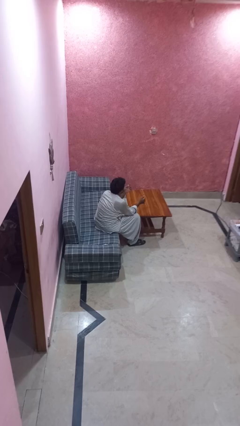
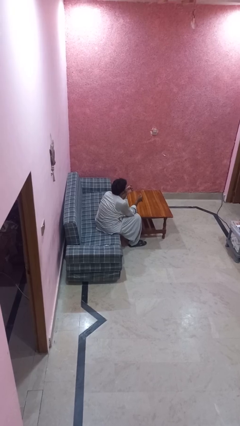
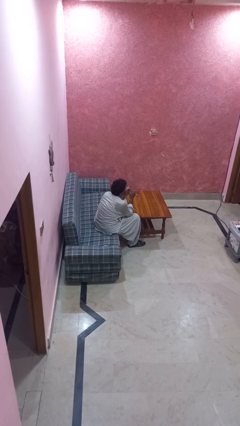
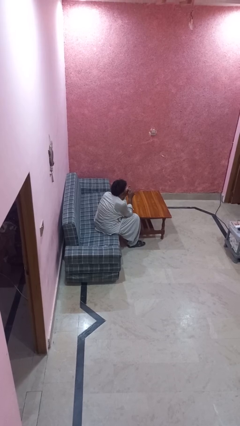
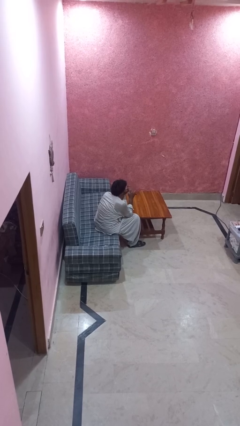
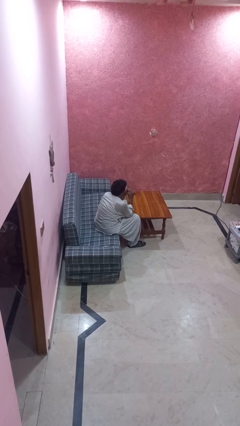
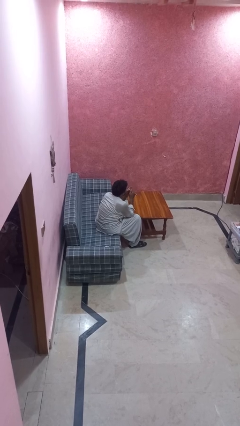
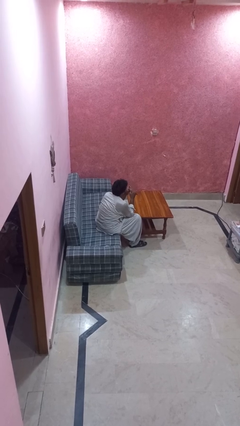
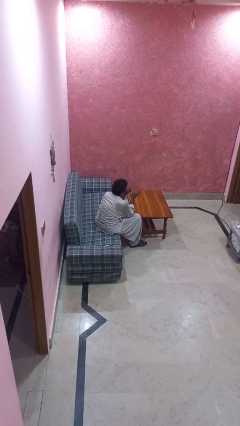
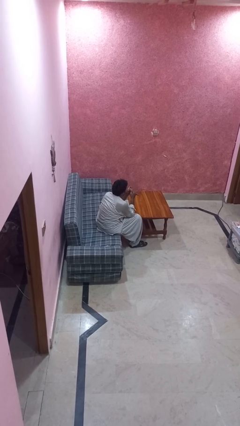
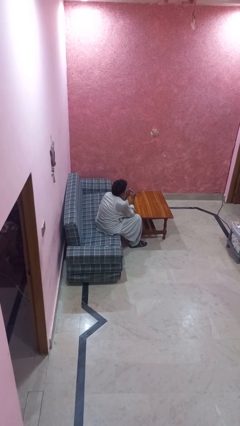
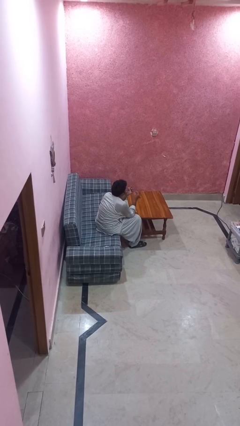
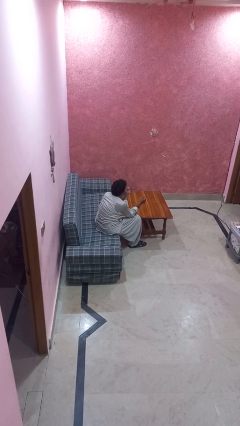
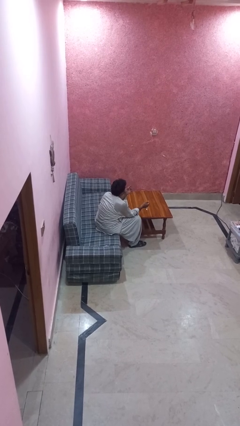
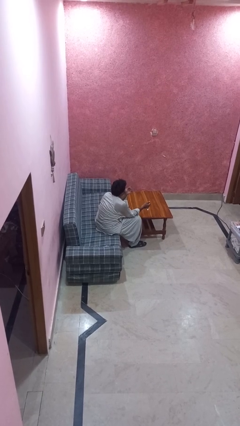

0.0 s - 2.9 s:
person files fingernails

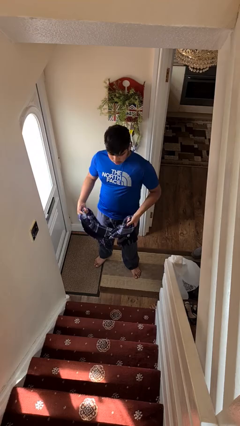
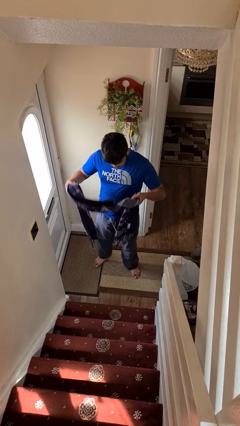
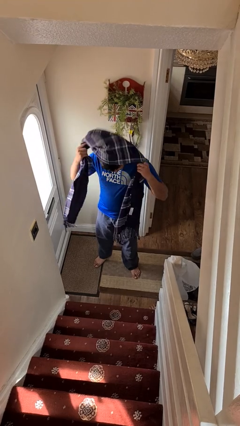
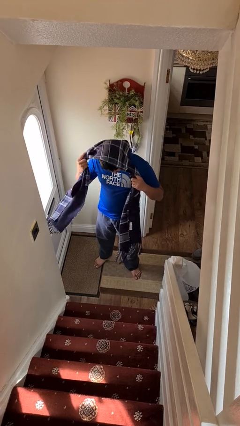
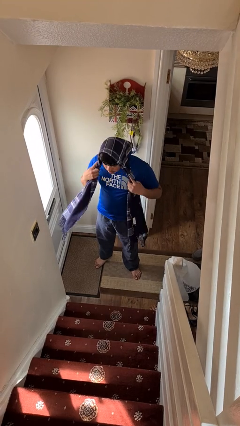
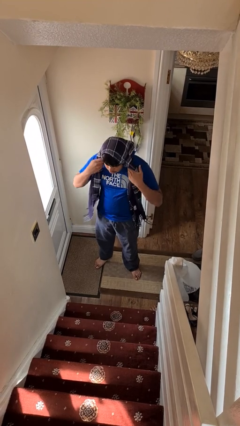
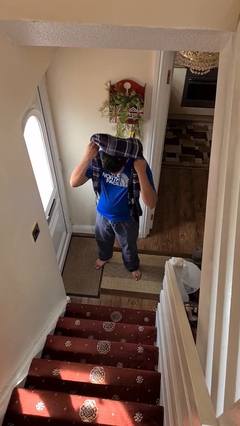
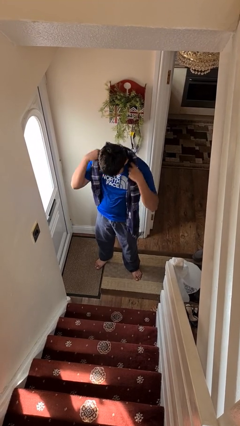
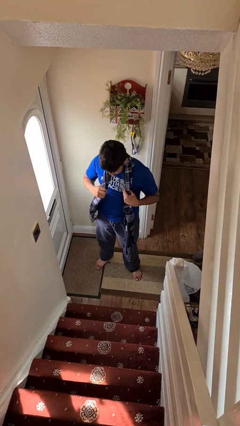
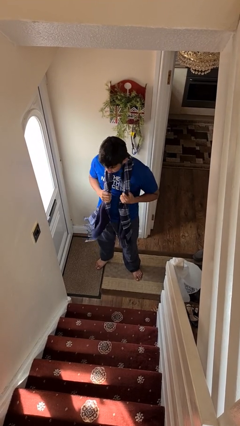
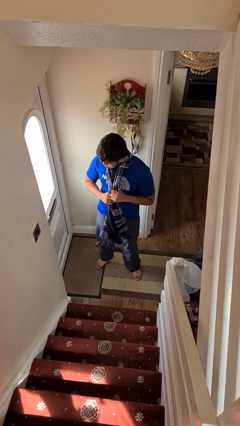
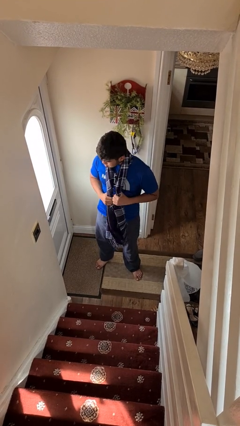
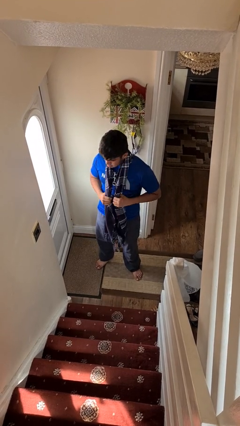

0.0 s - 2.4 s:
person puts on scarf

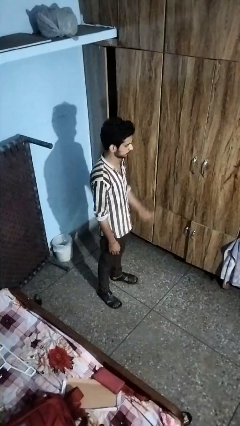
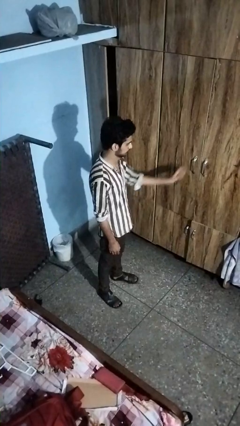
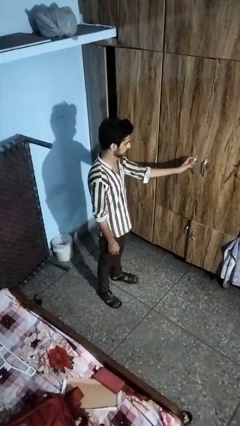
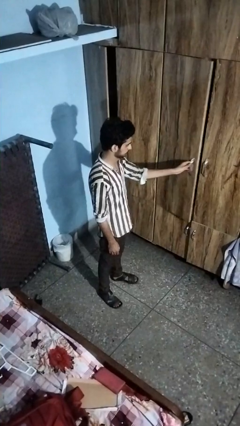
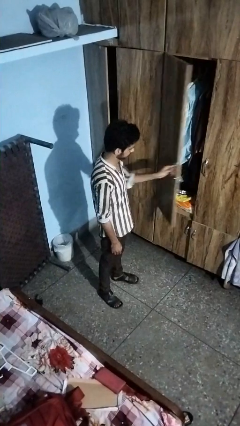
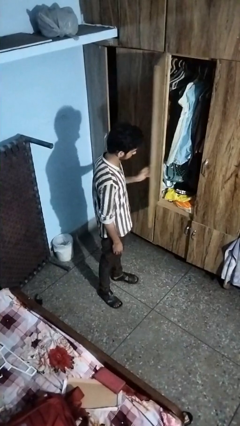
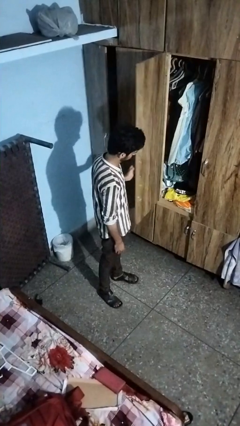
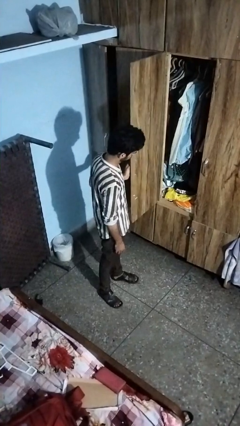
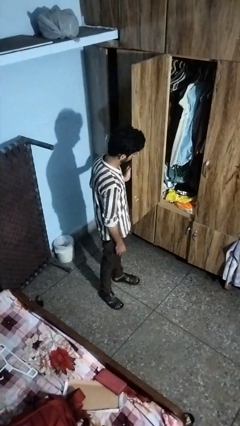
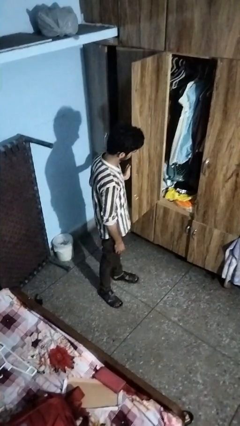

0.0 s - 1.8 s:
person opens closet door

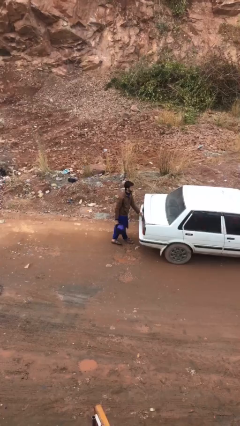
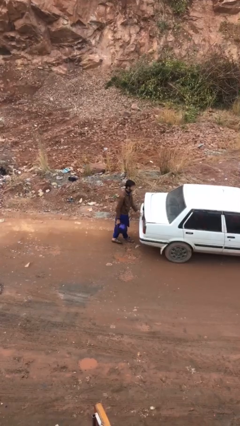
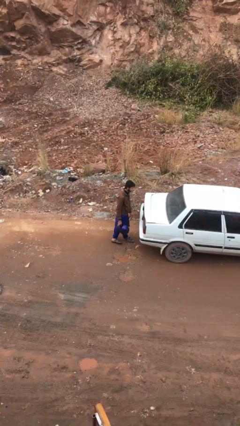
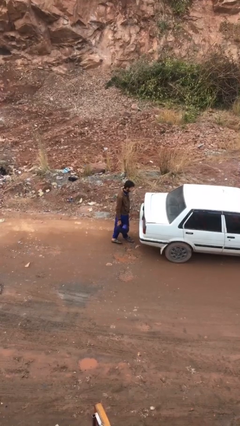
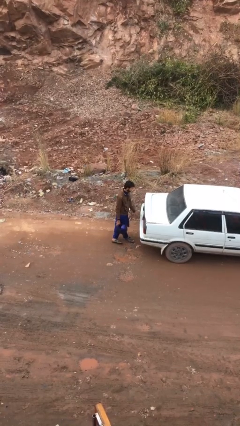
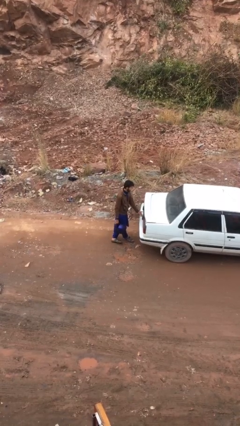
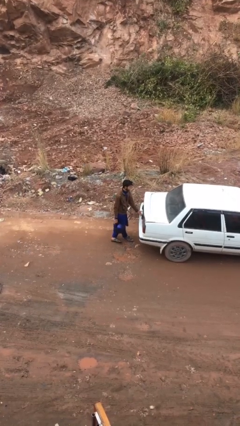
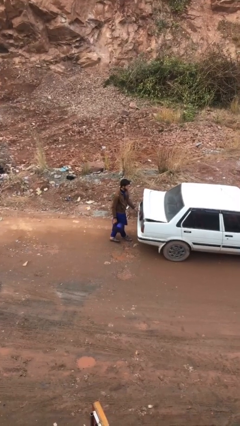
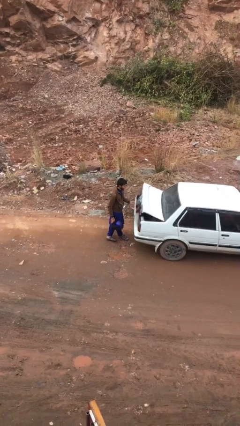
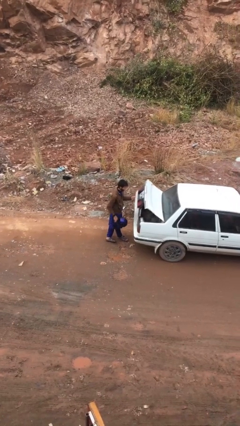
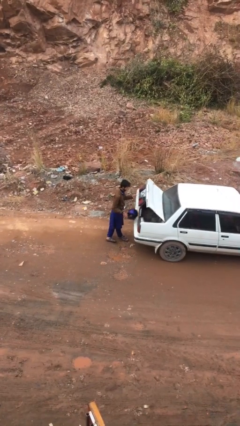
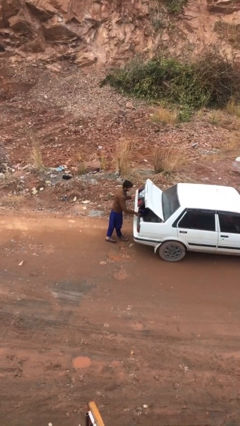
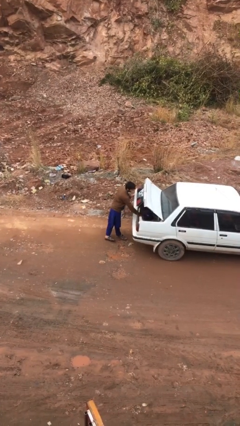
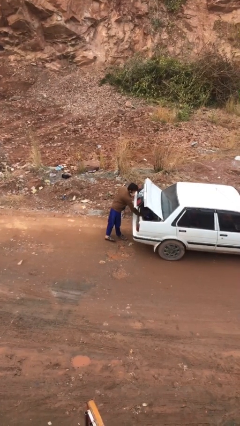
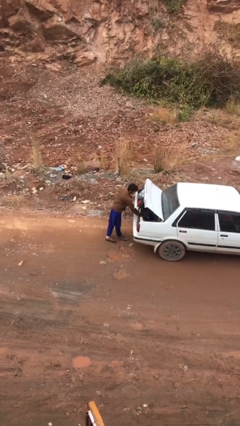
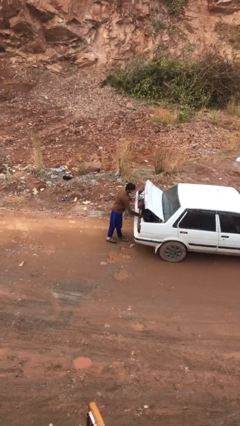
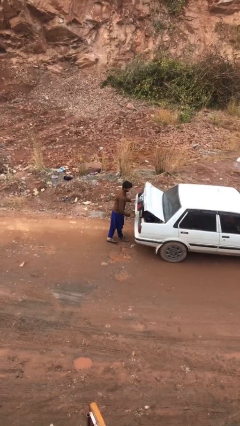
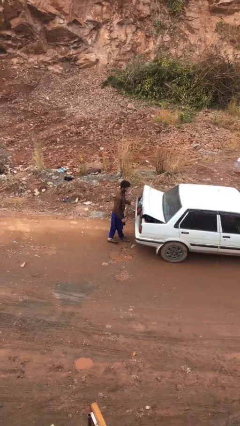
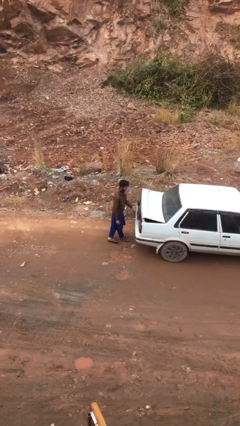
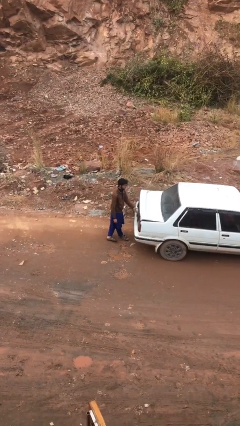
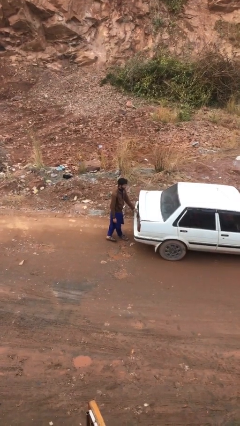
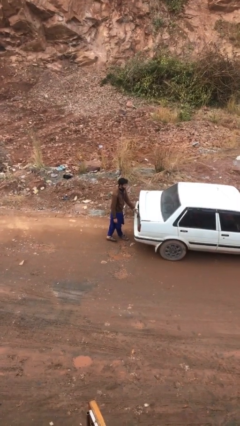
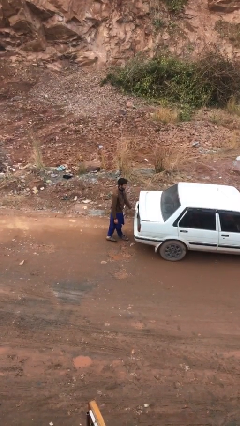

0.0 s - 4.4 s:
person loads car

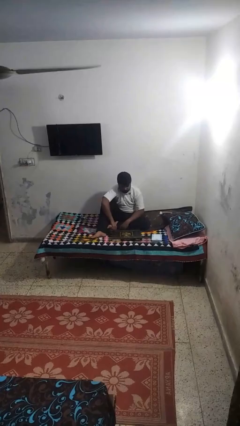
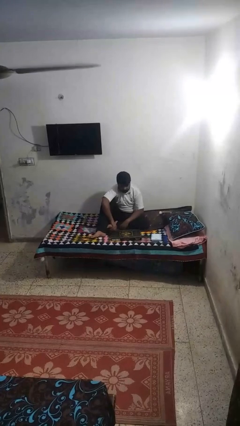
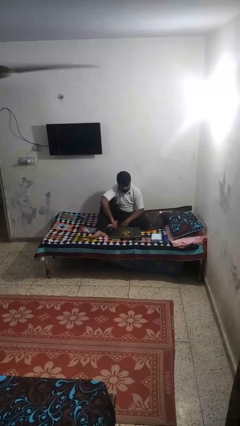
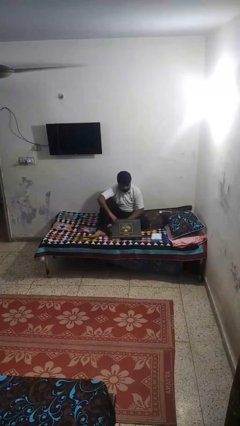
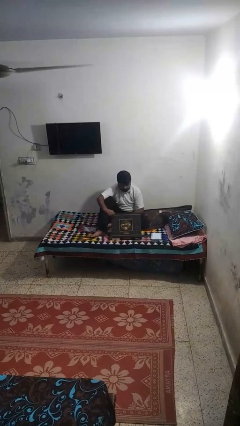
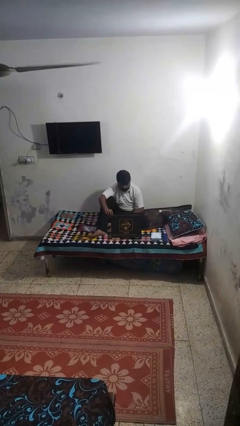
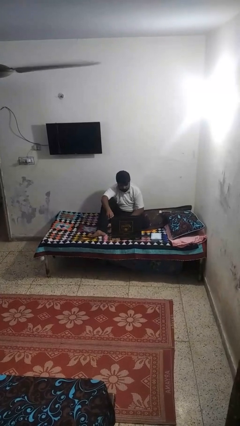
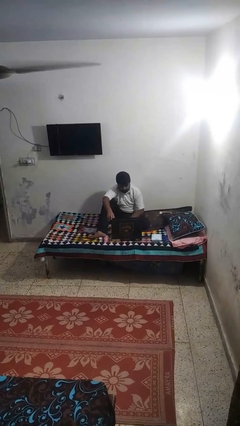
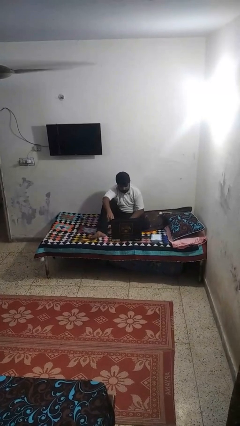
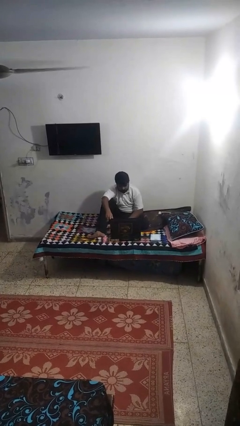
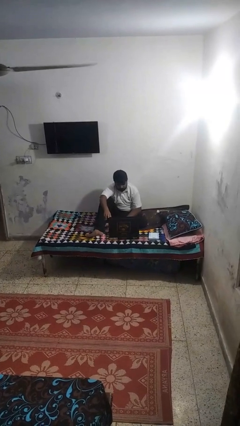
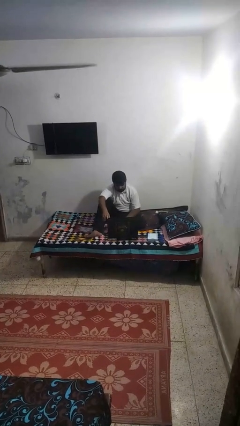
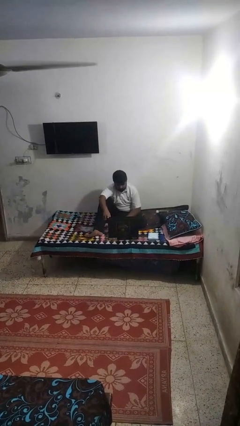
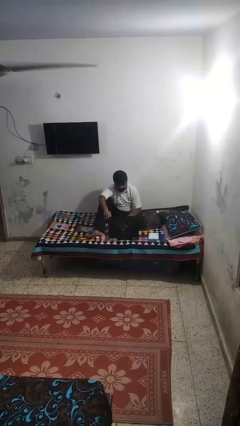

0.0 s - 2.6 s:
person opens laptop

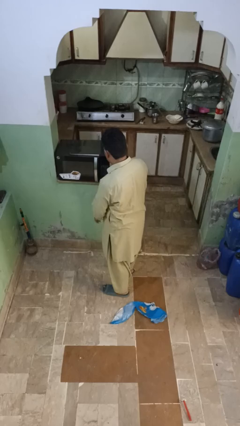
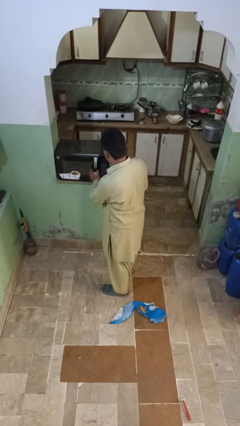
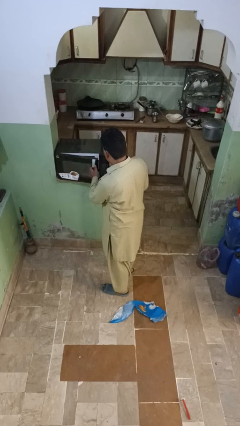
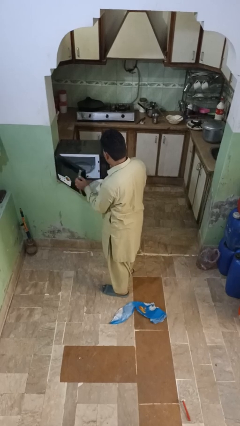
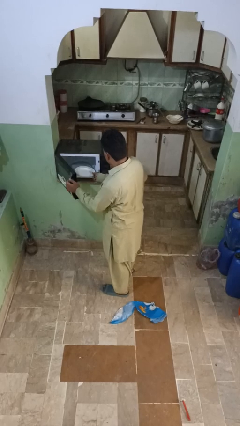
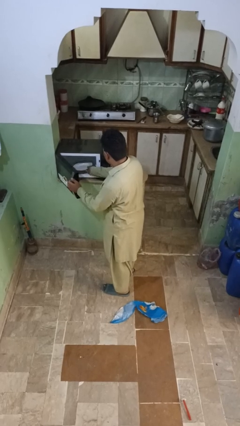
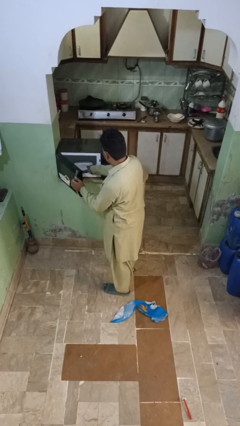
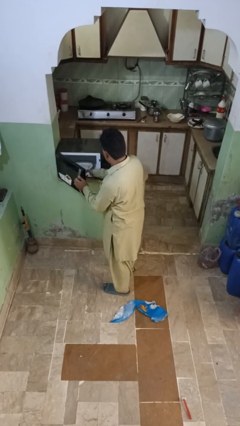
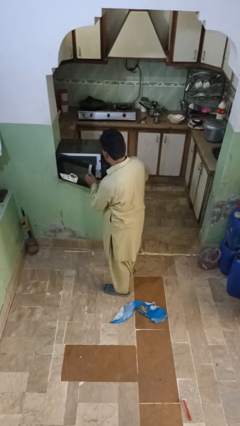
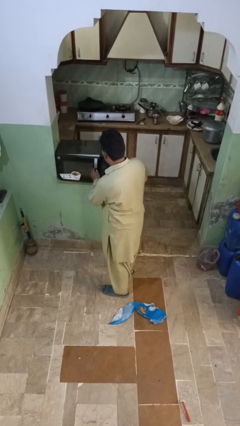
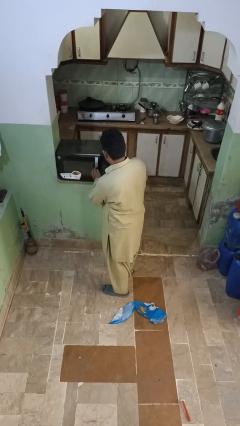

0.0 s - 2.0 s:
person puts object into microwave

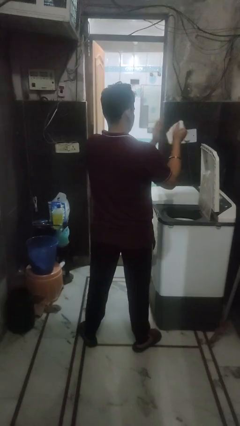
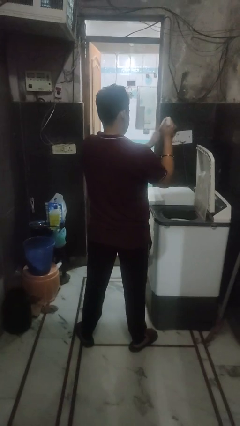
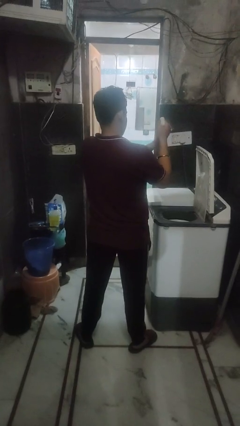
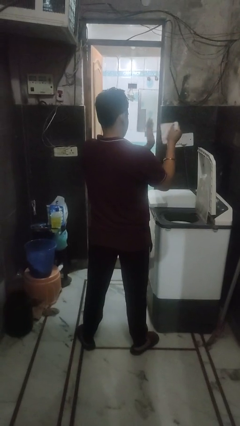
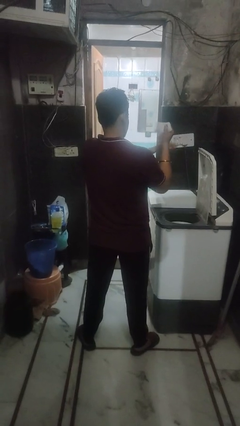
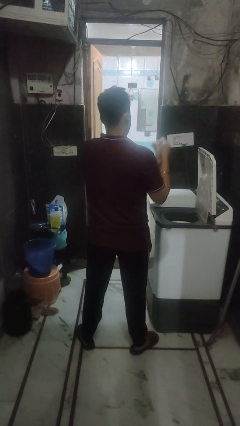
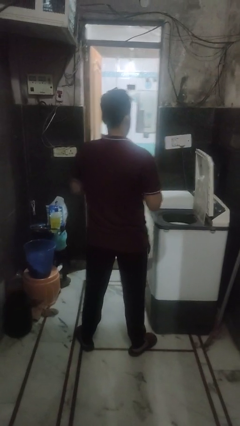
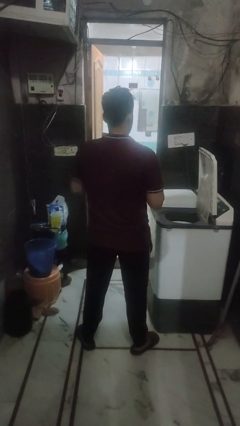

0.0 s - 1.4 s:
person cleans dryer lint trap
